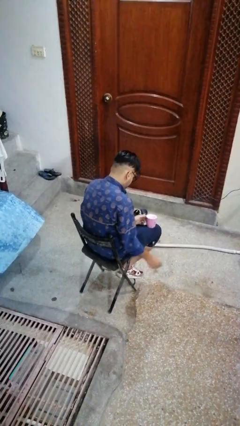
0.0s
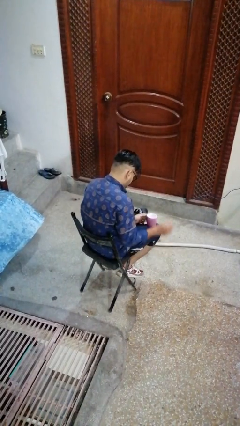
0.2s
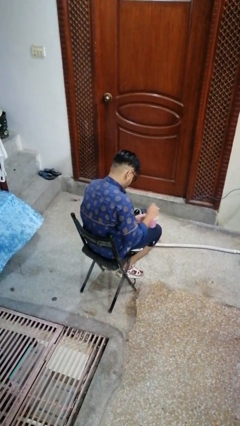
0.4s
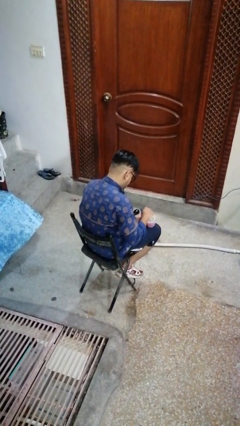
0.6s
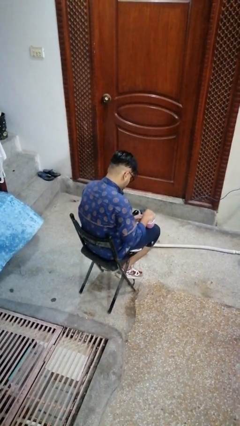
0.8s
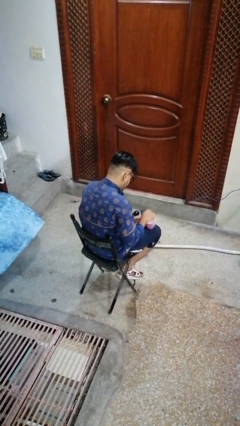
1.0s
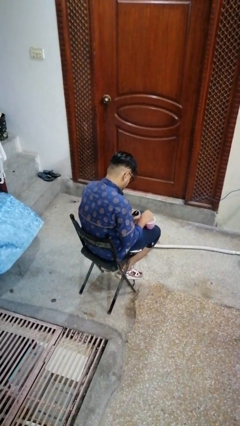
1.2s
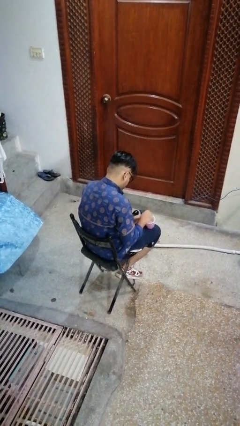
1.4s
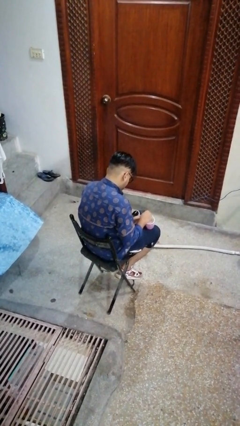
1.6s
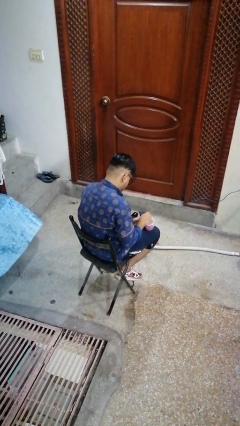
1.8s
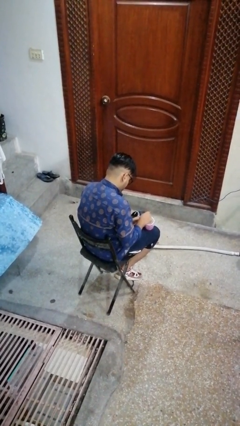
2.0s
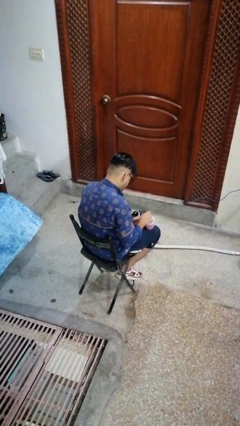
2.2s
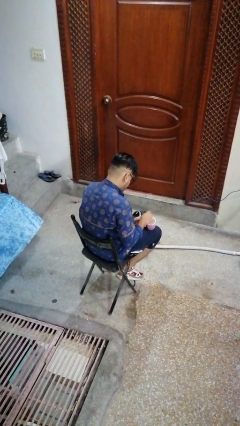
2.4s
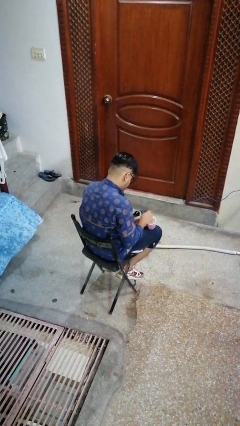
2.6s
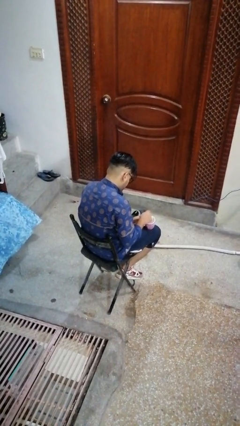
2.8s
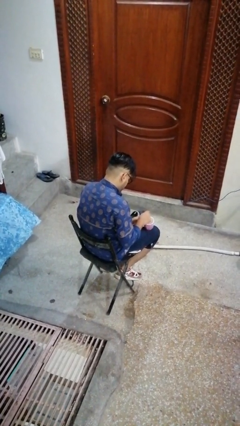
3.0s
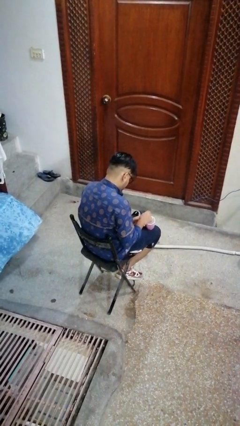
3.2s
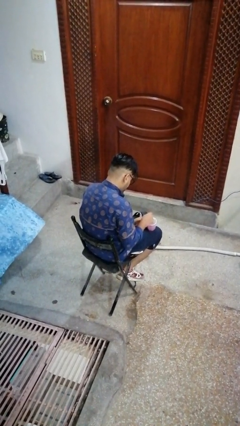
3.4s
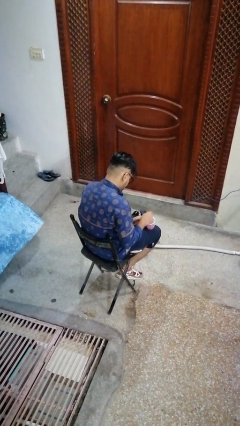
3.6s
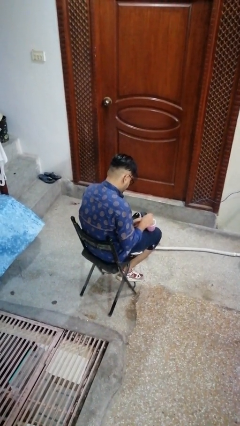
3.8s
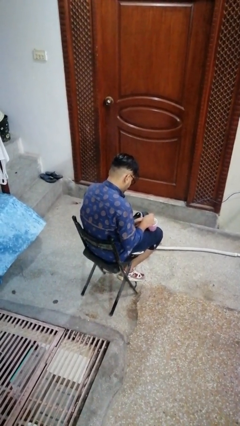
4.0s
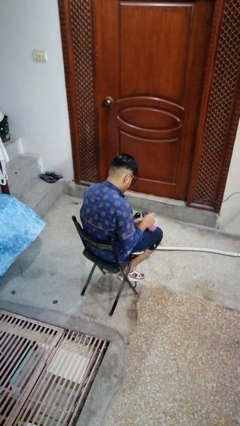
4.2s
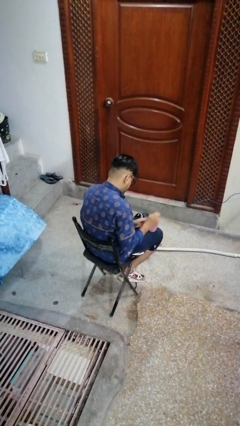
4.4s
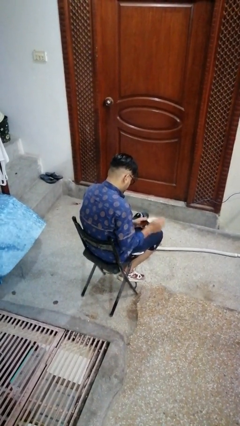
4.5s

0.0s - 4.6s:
person stirs mug

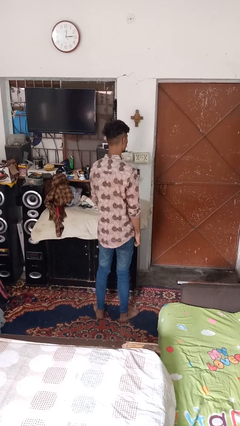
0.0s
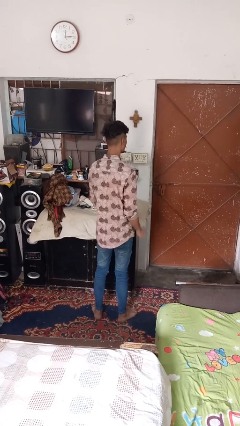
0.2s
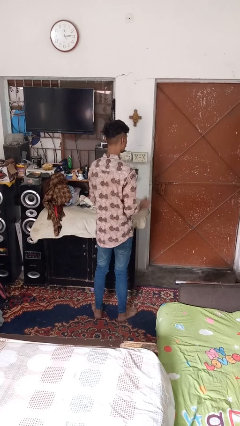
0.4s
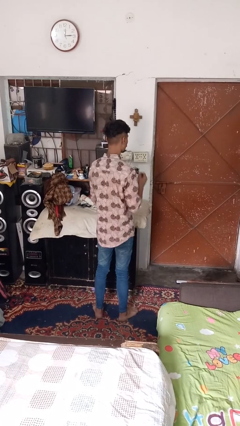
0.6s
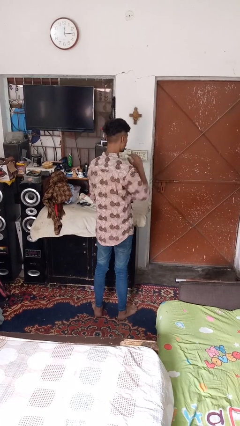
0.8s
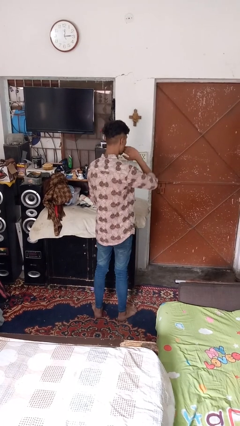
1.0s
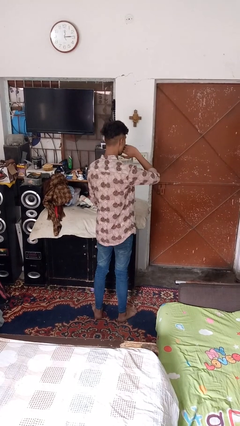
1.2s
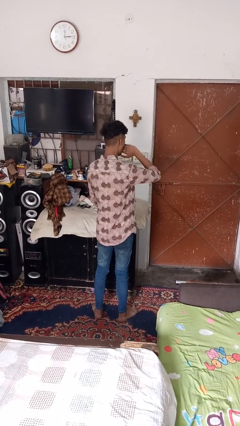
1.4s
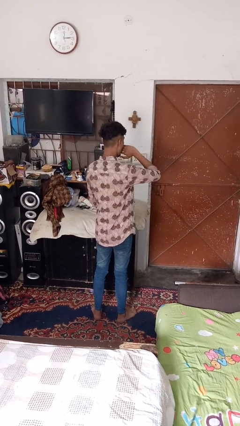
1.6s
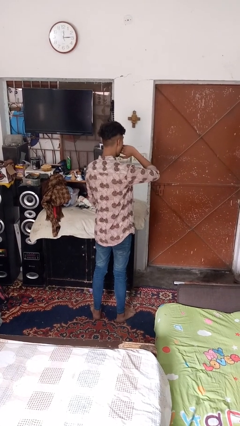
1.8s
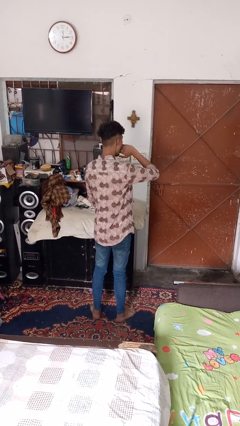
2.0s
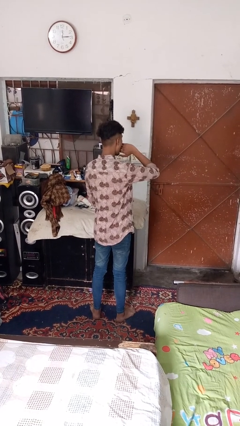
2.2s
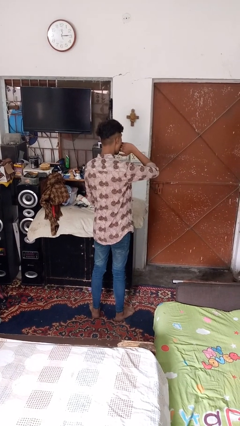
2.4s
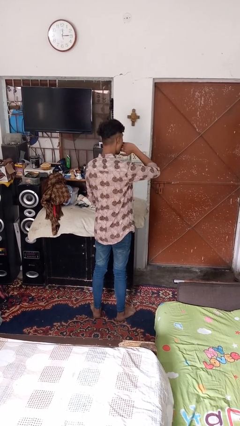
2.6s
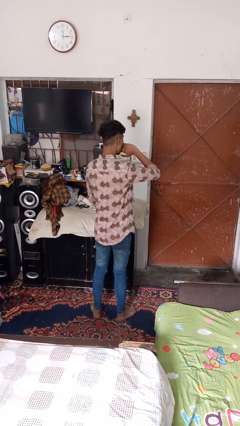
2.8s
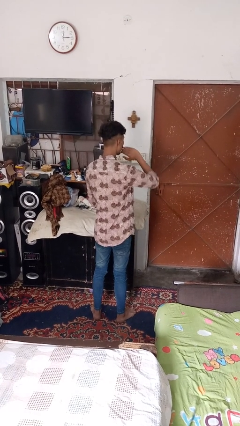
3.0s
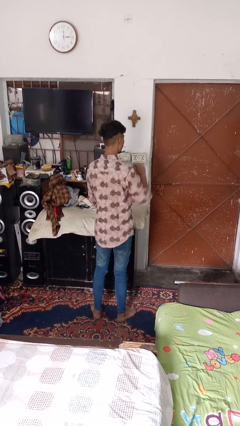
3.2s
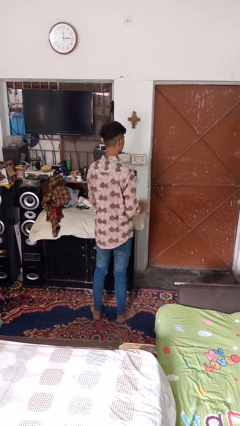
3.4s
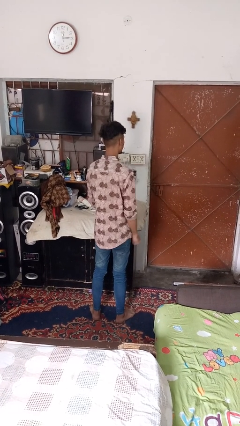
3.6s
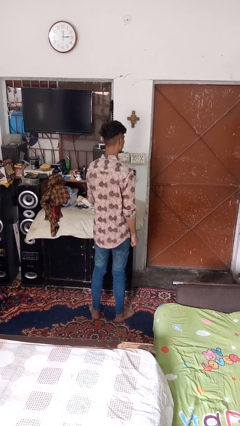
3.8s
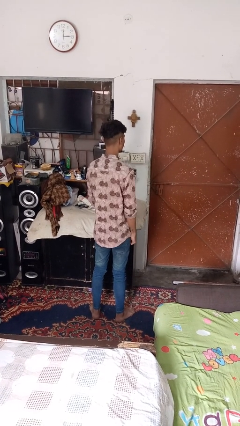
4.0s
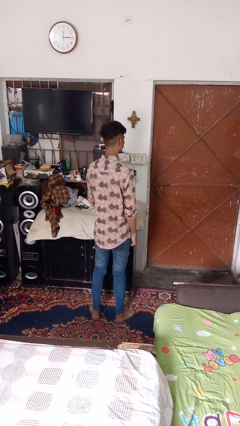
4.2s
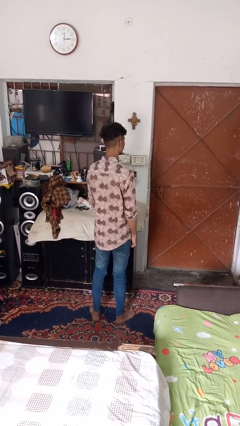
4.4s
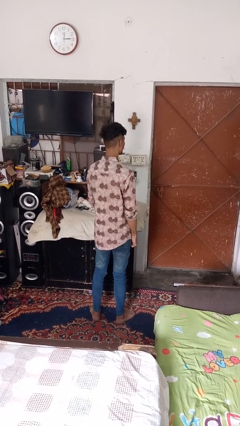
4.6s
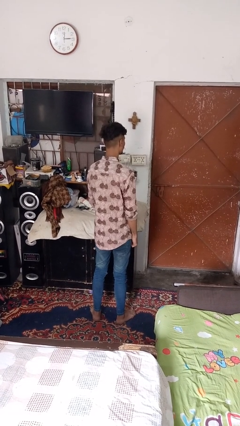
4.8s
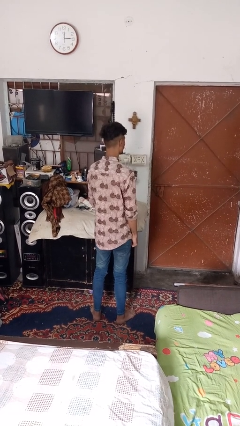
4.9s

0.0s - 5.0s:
person yawns

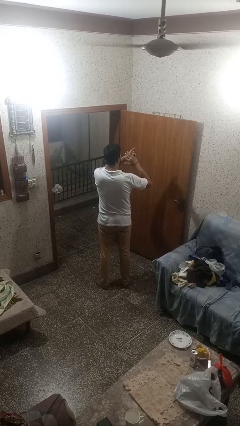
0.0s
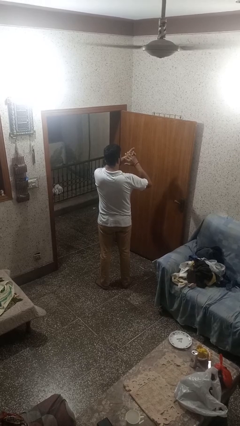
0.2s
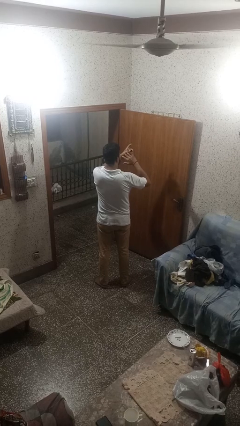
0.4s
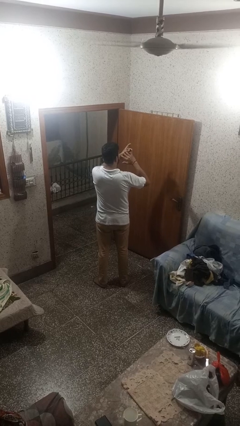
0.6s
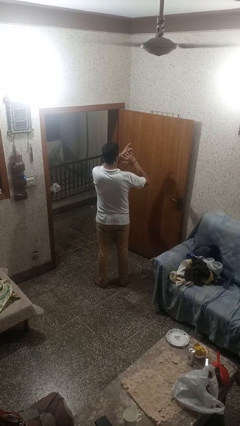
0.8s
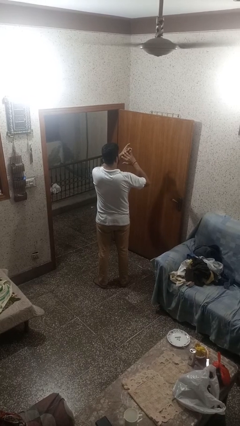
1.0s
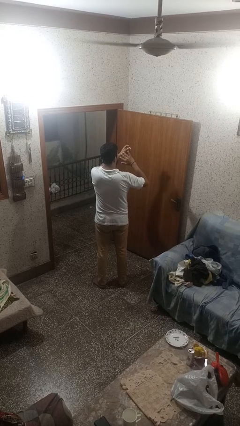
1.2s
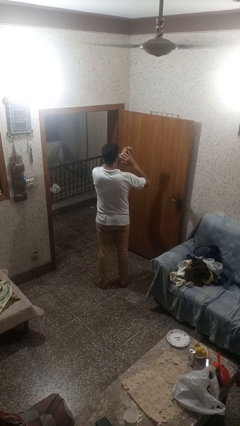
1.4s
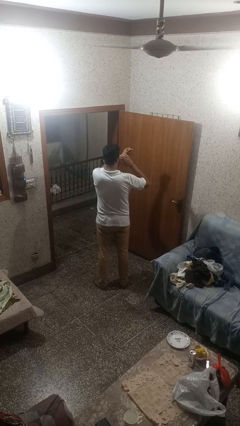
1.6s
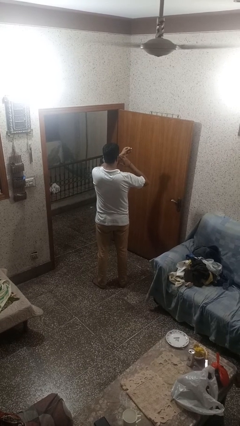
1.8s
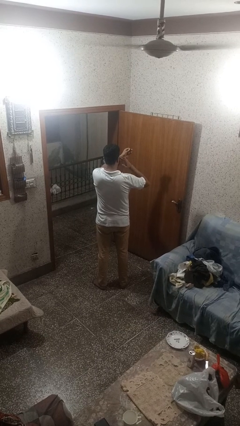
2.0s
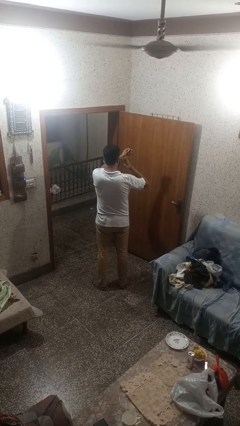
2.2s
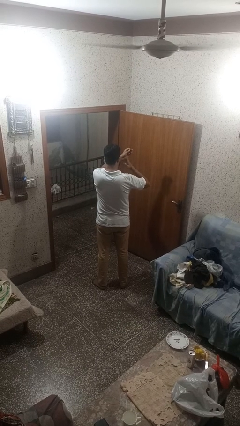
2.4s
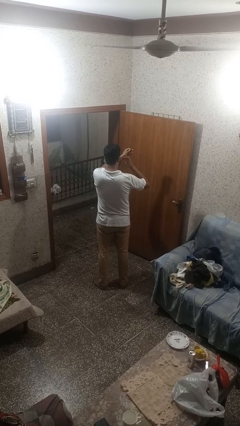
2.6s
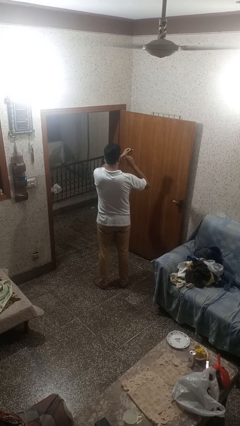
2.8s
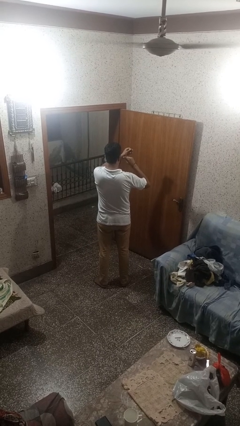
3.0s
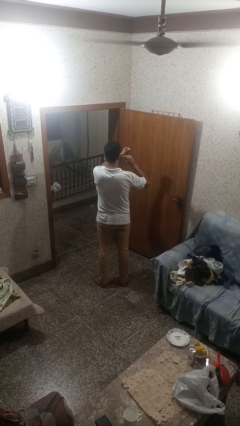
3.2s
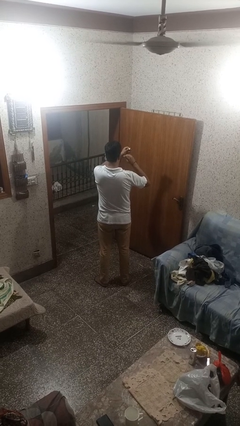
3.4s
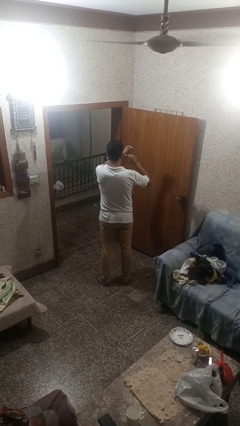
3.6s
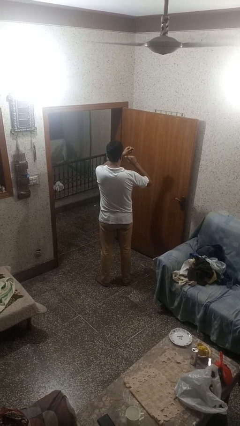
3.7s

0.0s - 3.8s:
person takes off ring

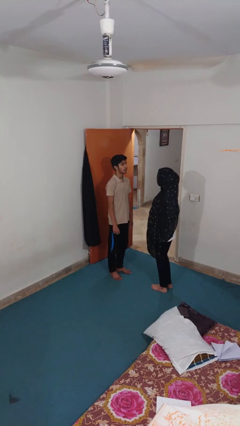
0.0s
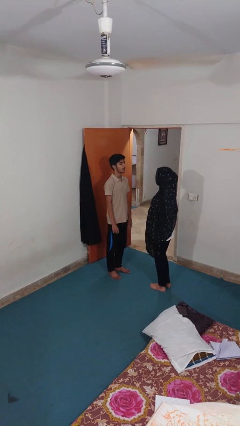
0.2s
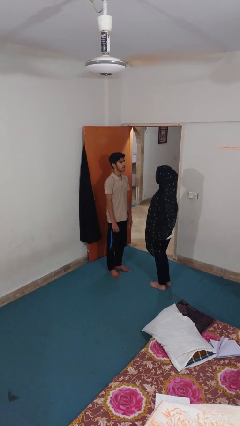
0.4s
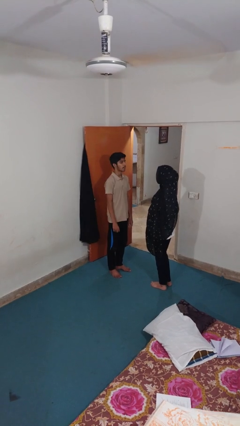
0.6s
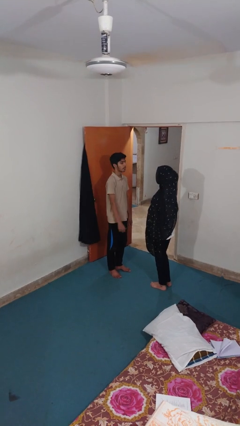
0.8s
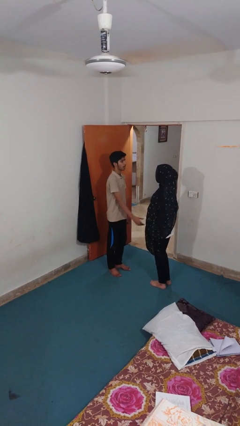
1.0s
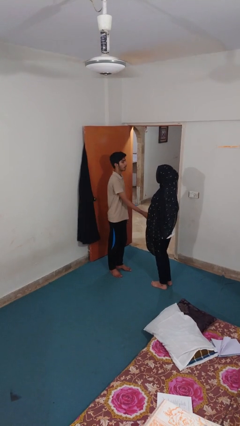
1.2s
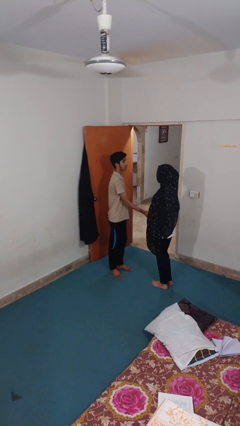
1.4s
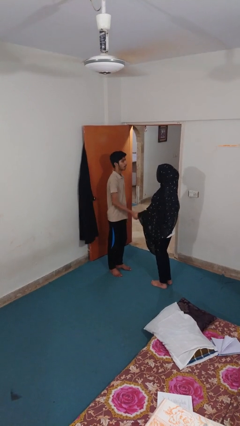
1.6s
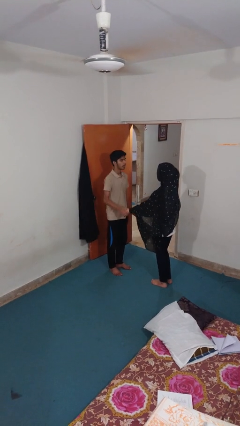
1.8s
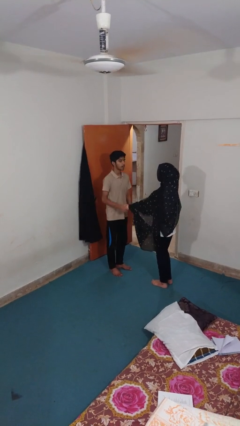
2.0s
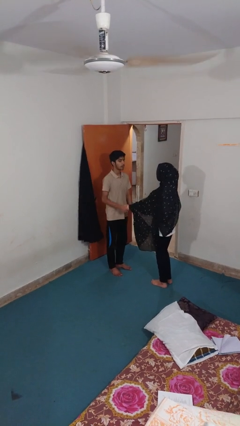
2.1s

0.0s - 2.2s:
person grabs person by forearm

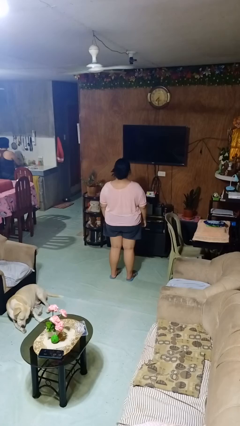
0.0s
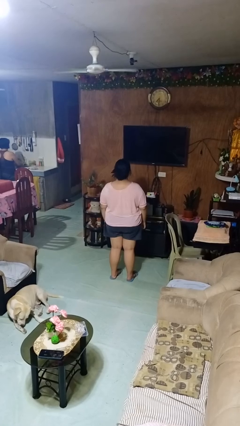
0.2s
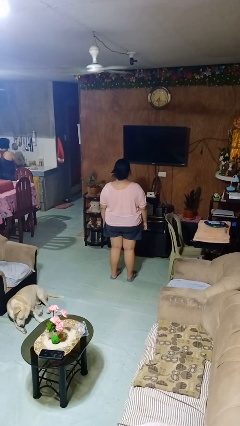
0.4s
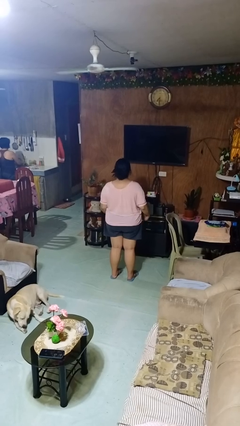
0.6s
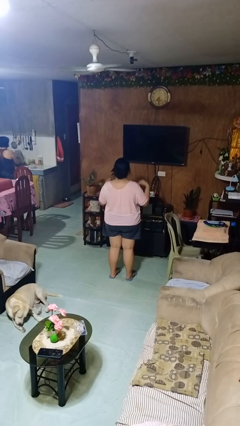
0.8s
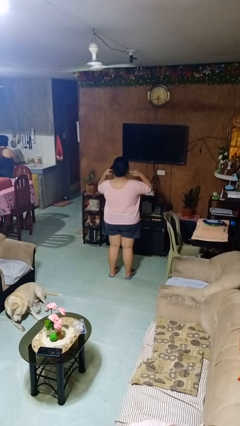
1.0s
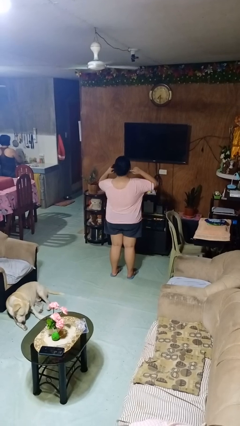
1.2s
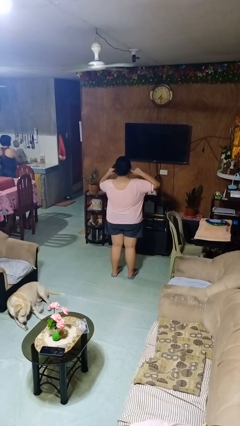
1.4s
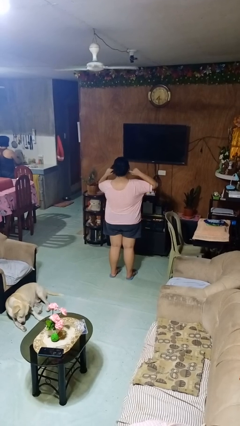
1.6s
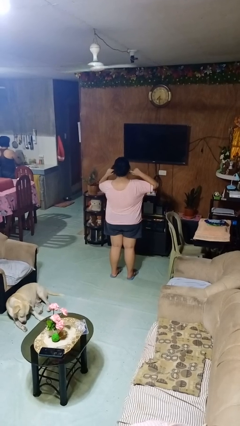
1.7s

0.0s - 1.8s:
person puts fingers in ear

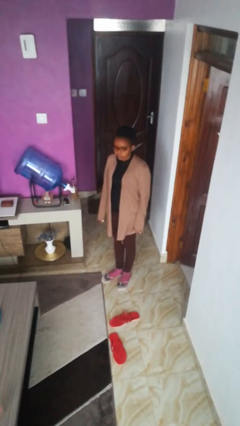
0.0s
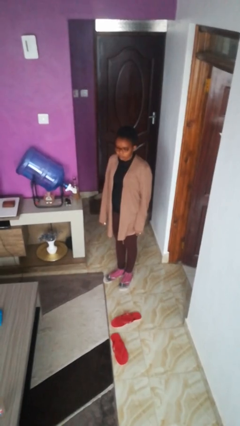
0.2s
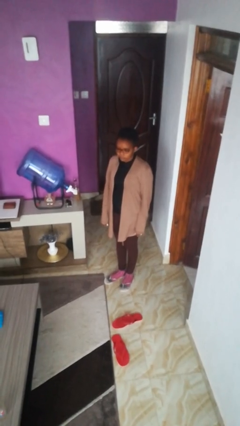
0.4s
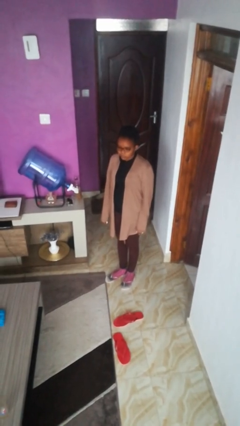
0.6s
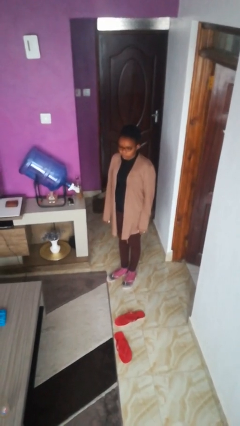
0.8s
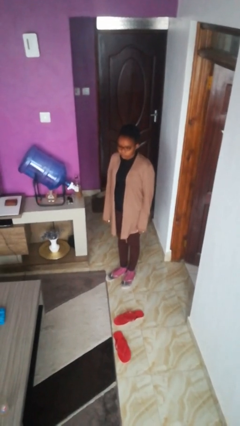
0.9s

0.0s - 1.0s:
person takes off glasses
